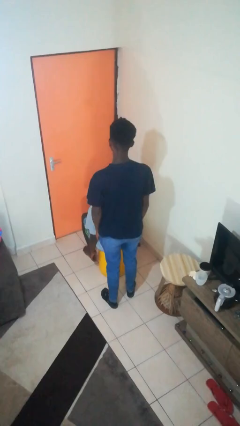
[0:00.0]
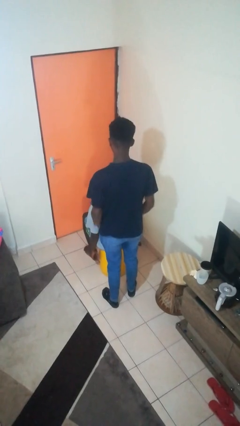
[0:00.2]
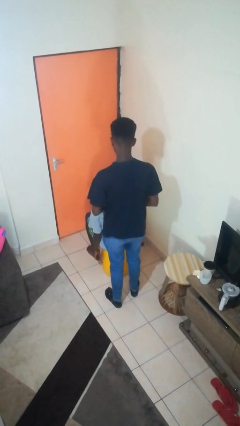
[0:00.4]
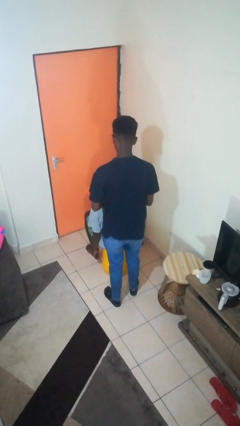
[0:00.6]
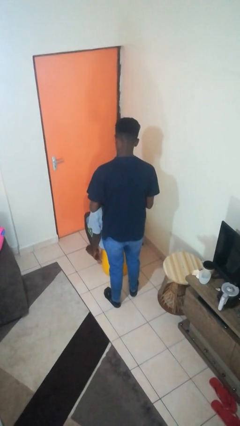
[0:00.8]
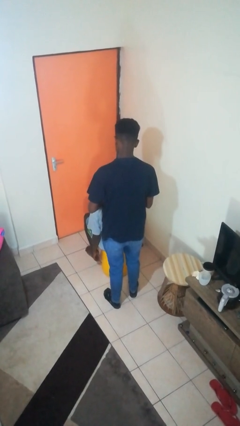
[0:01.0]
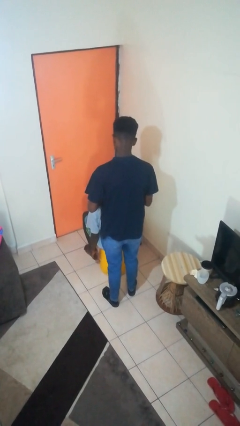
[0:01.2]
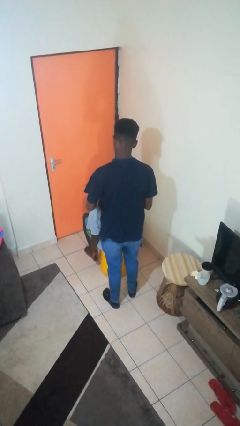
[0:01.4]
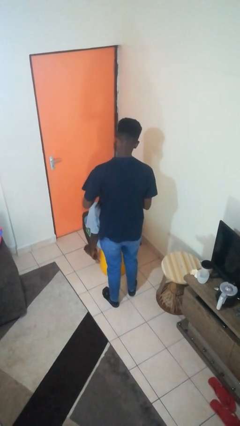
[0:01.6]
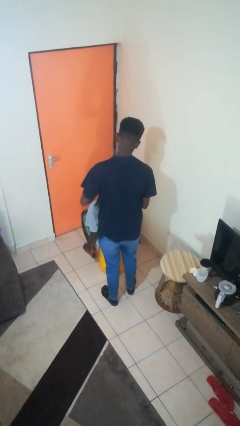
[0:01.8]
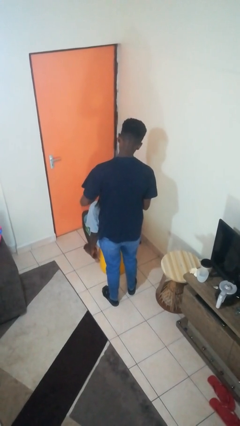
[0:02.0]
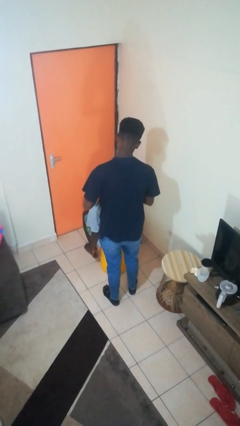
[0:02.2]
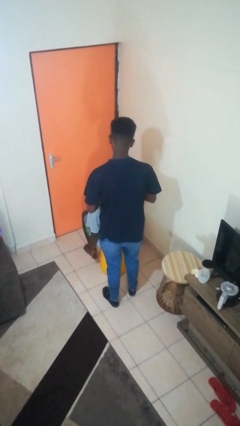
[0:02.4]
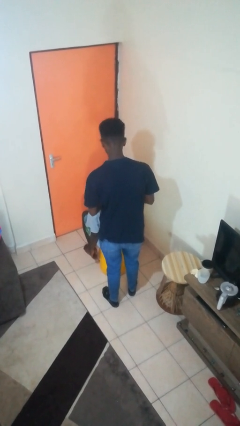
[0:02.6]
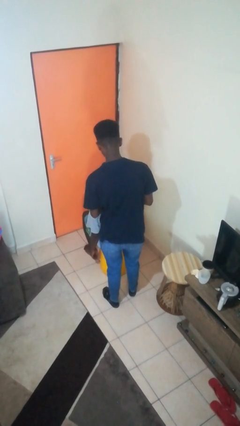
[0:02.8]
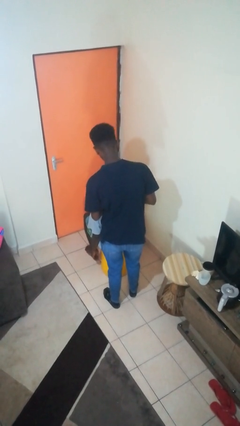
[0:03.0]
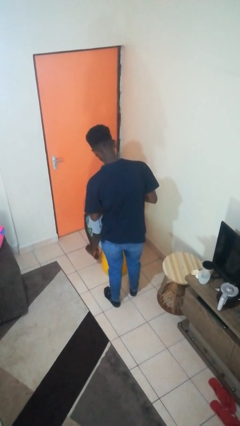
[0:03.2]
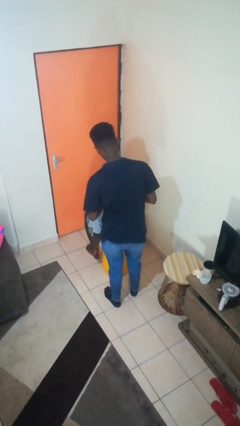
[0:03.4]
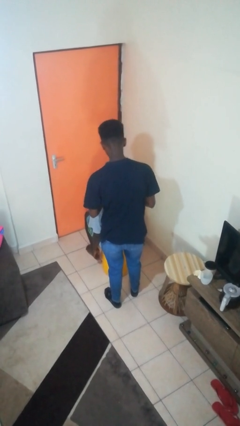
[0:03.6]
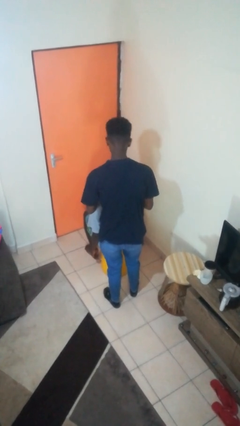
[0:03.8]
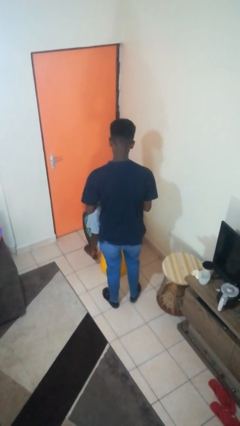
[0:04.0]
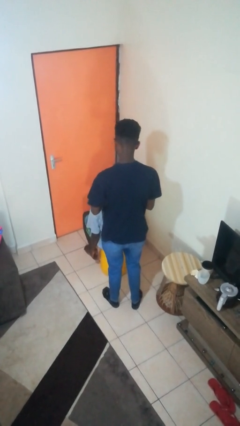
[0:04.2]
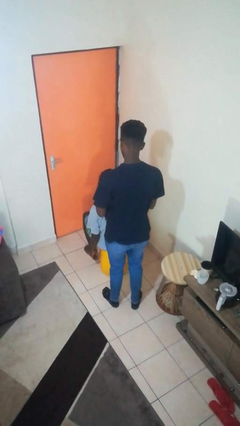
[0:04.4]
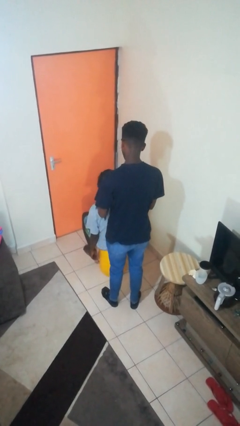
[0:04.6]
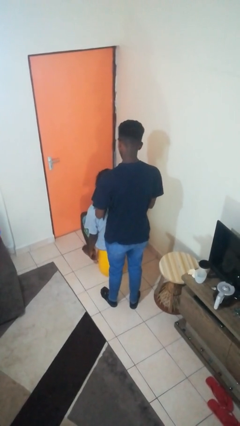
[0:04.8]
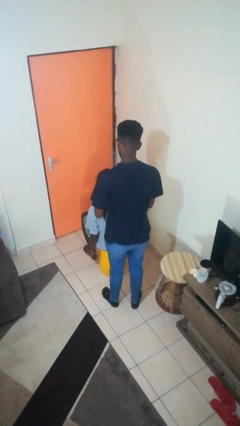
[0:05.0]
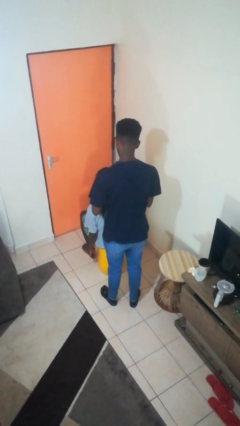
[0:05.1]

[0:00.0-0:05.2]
person braids hair of person

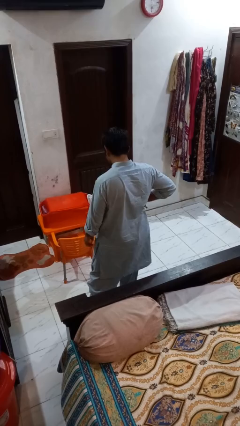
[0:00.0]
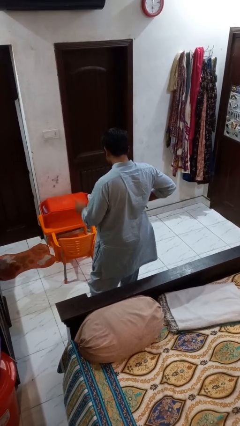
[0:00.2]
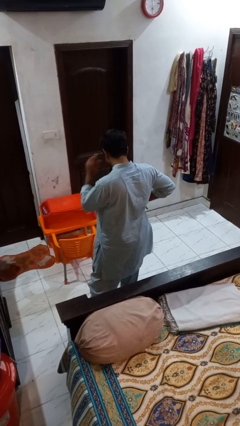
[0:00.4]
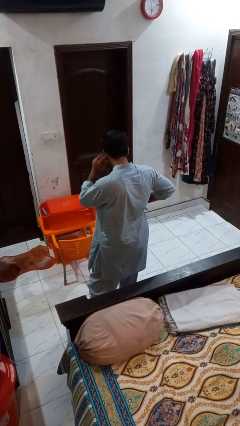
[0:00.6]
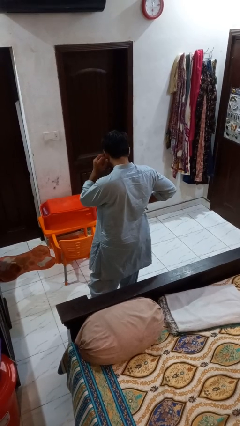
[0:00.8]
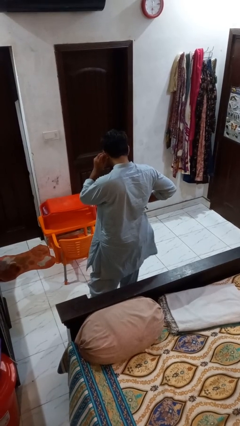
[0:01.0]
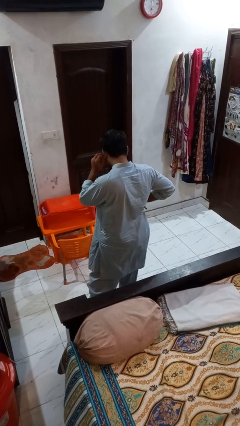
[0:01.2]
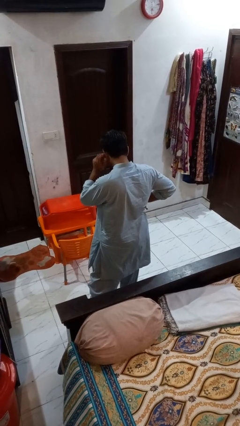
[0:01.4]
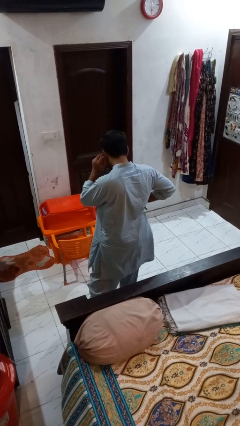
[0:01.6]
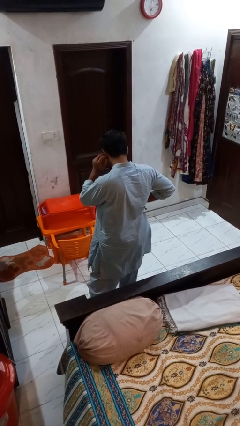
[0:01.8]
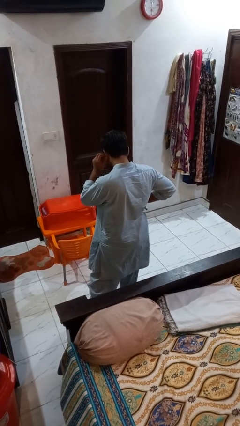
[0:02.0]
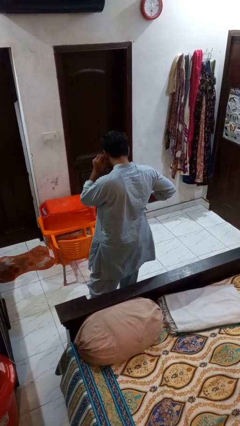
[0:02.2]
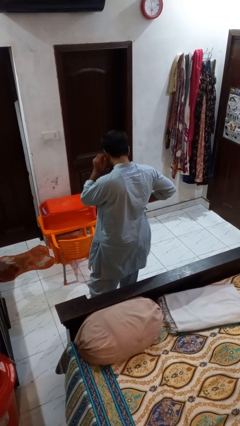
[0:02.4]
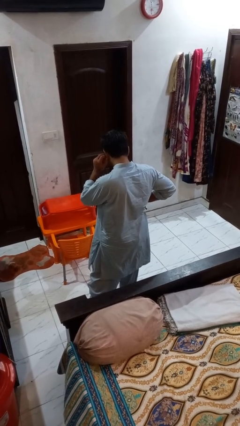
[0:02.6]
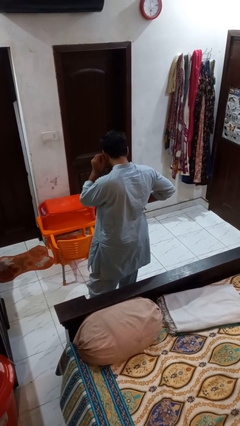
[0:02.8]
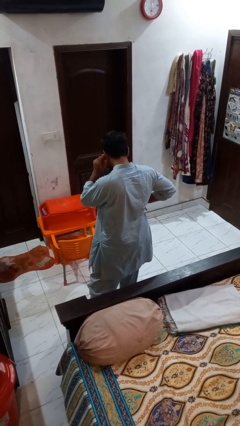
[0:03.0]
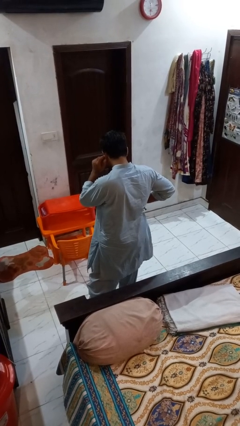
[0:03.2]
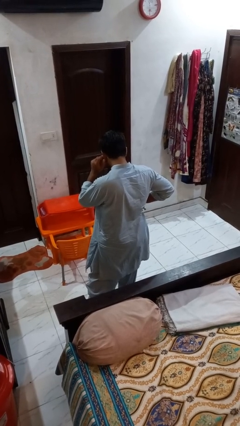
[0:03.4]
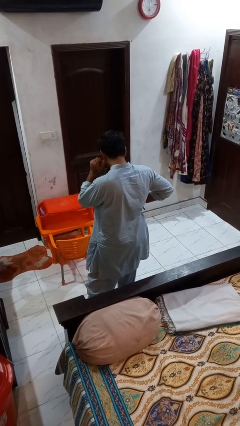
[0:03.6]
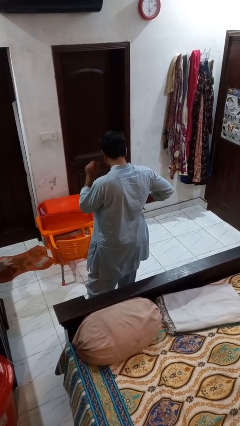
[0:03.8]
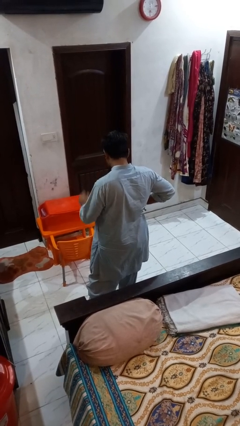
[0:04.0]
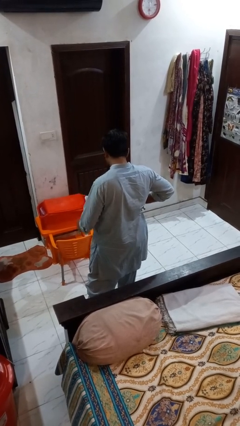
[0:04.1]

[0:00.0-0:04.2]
person touches earlobe

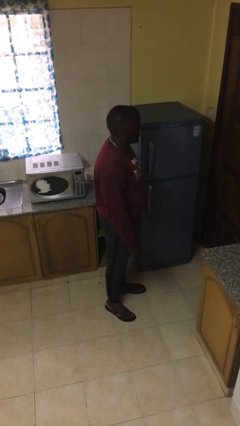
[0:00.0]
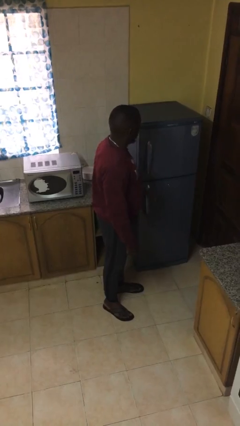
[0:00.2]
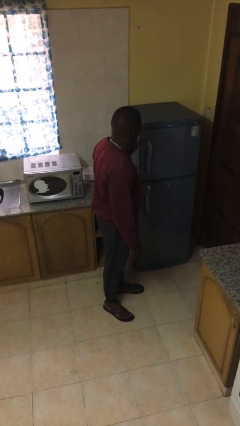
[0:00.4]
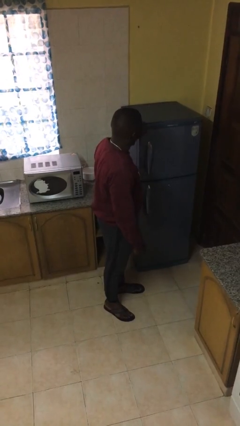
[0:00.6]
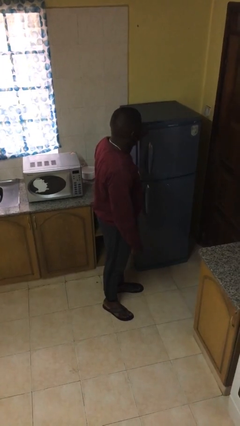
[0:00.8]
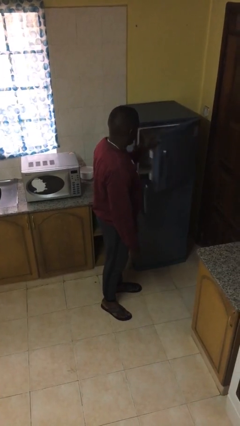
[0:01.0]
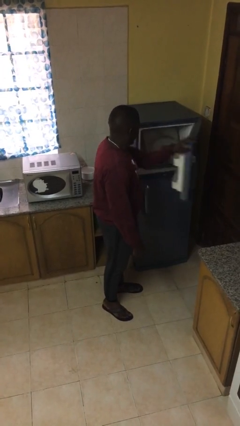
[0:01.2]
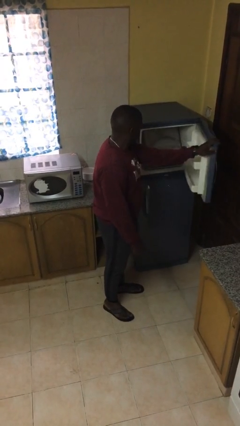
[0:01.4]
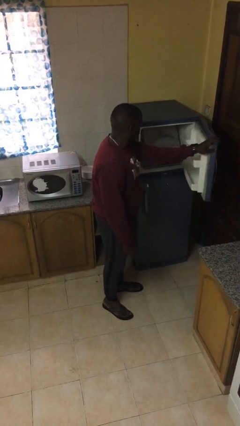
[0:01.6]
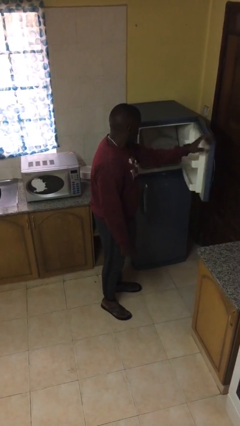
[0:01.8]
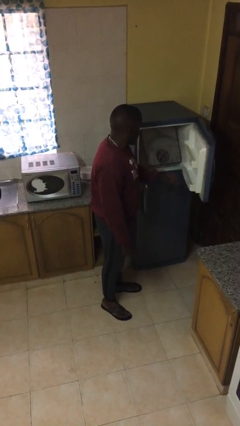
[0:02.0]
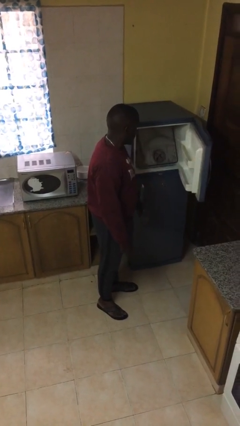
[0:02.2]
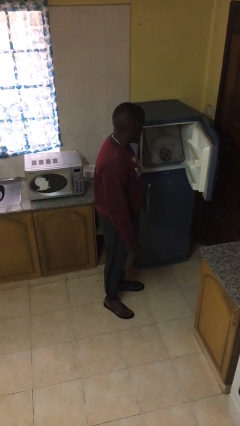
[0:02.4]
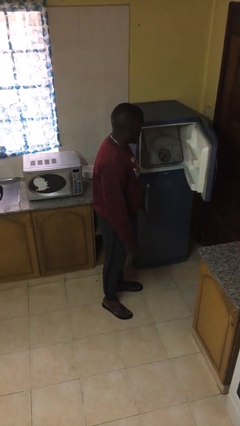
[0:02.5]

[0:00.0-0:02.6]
person opens refrigerator

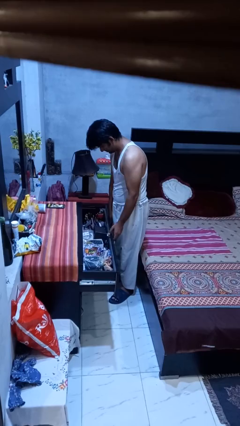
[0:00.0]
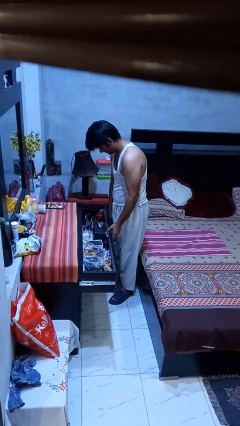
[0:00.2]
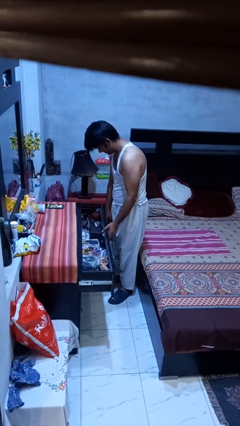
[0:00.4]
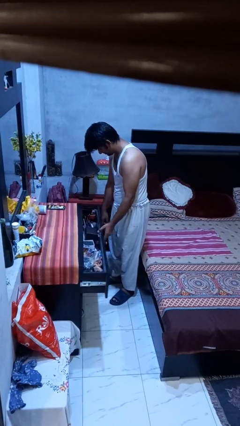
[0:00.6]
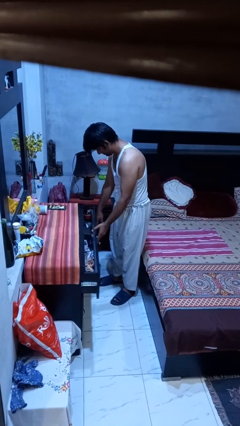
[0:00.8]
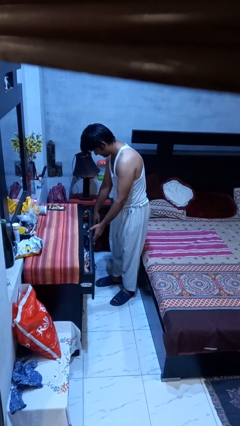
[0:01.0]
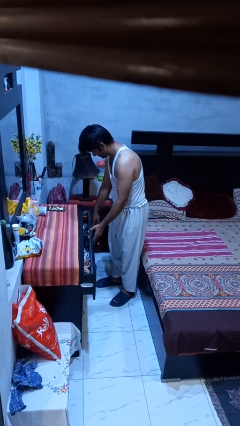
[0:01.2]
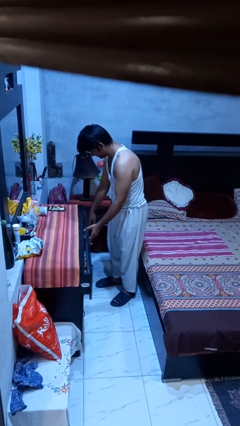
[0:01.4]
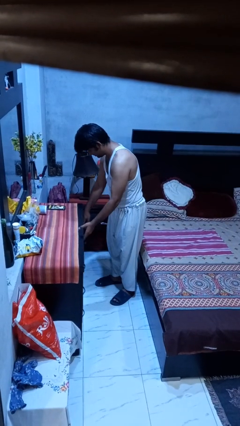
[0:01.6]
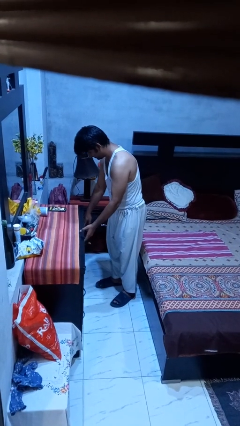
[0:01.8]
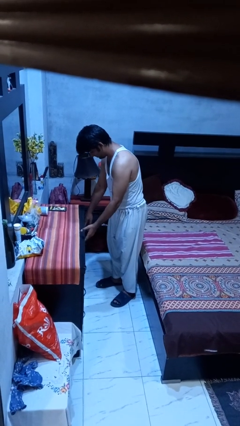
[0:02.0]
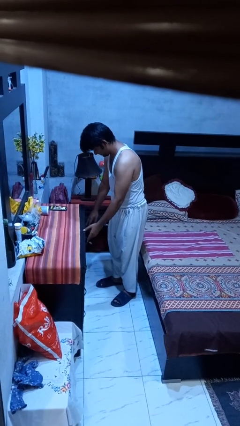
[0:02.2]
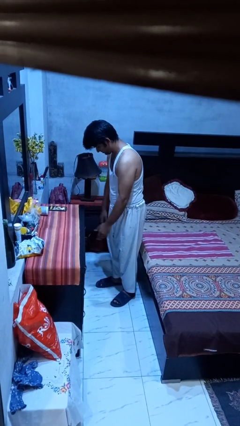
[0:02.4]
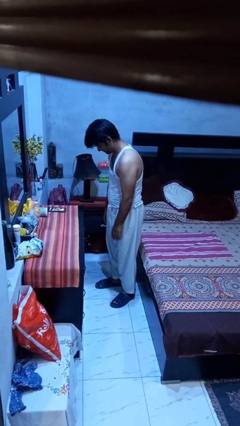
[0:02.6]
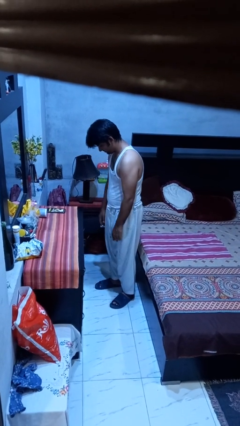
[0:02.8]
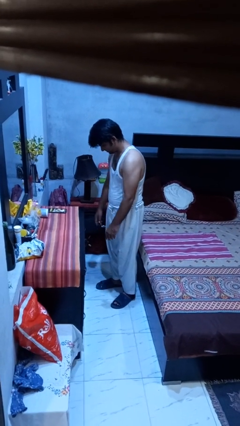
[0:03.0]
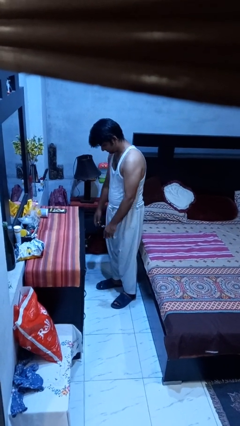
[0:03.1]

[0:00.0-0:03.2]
person closes dresser drawer

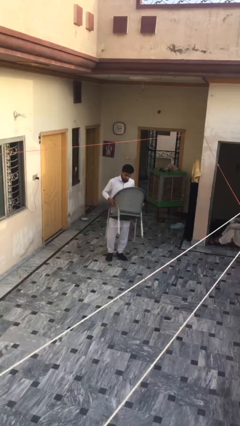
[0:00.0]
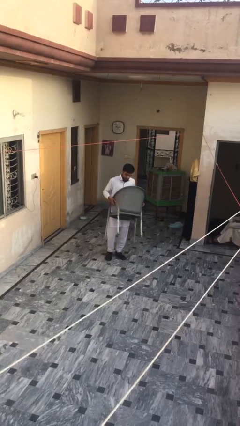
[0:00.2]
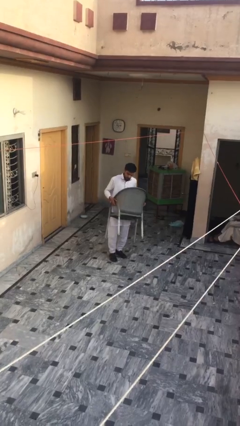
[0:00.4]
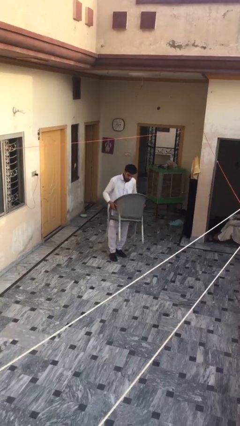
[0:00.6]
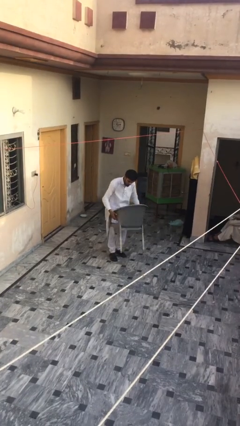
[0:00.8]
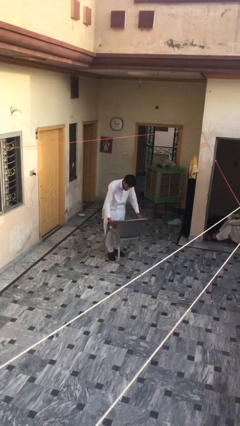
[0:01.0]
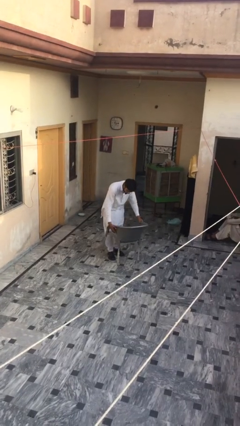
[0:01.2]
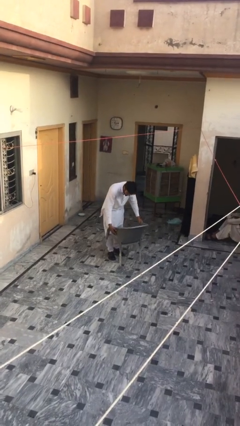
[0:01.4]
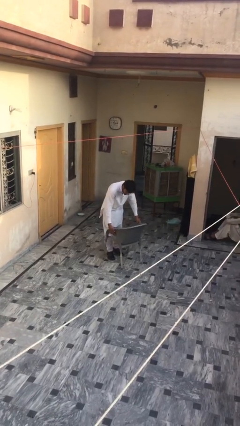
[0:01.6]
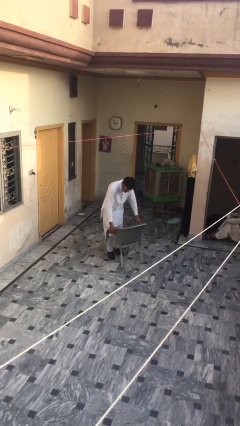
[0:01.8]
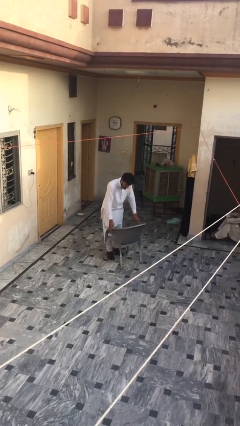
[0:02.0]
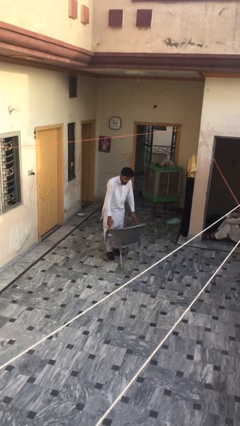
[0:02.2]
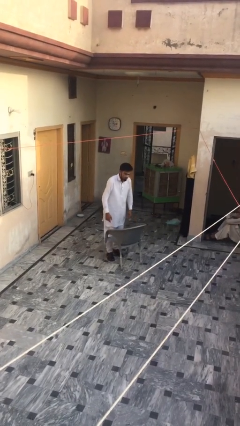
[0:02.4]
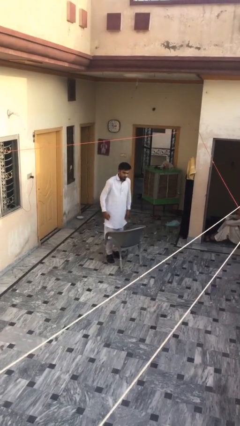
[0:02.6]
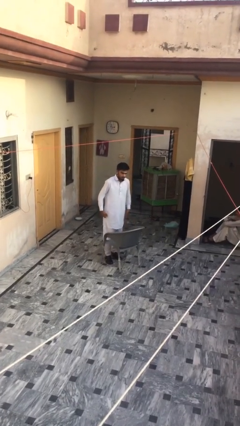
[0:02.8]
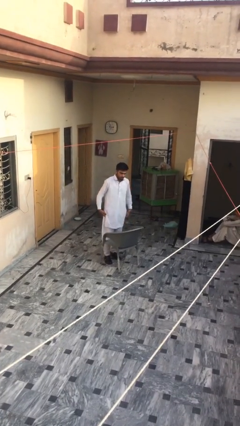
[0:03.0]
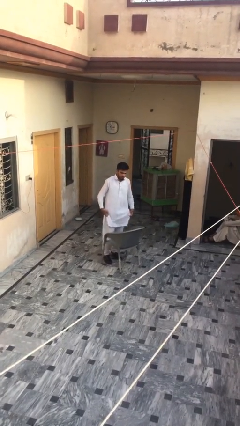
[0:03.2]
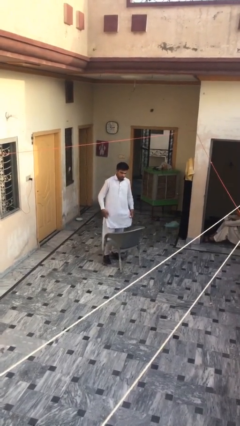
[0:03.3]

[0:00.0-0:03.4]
person puts down object on floor
